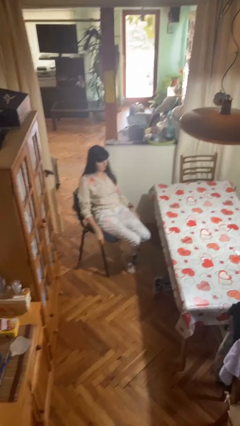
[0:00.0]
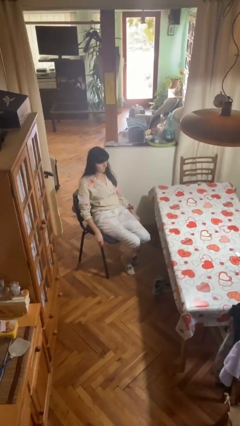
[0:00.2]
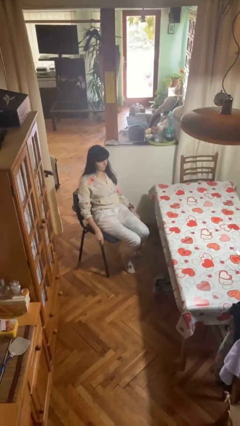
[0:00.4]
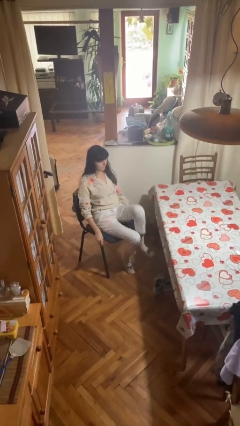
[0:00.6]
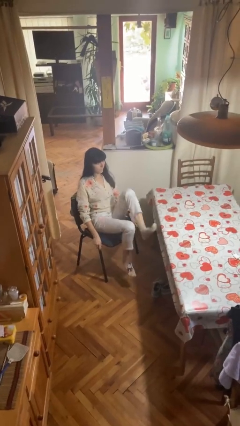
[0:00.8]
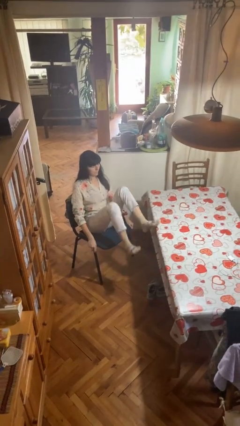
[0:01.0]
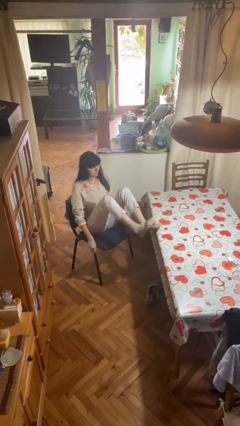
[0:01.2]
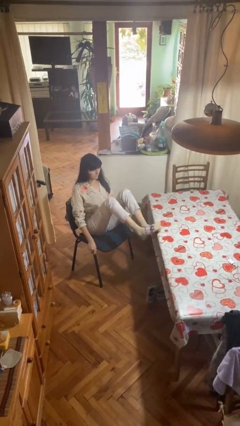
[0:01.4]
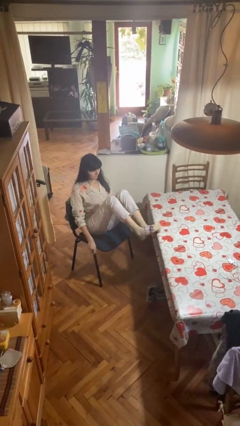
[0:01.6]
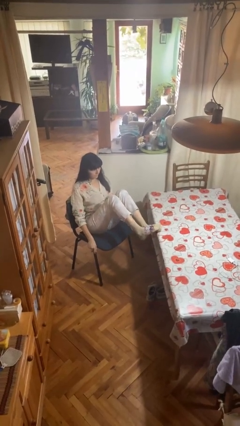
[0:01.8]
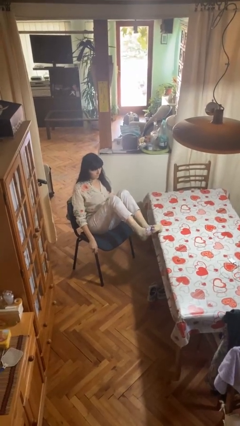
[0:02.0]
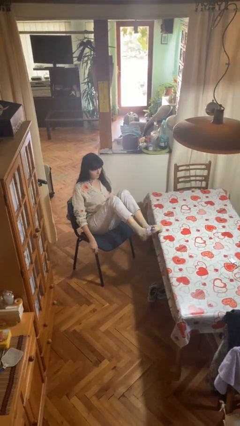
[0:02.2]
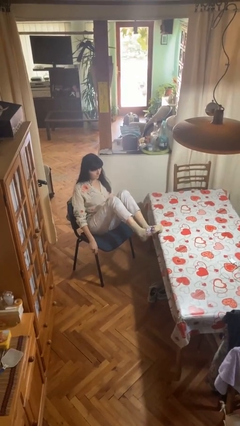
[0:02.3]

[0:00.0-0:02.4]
person puts feet up

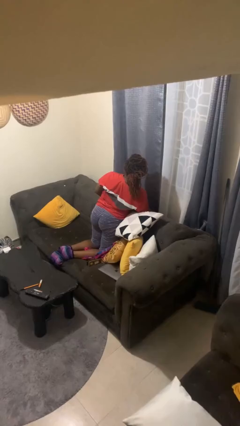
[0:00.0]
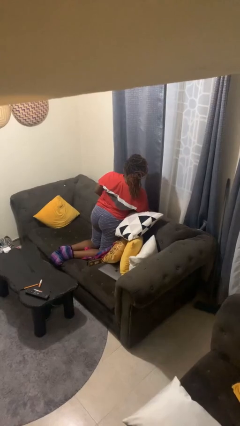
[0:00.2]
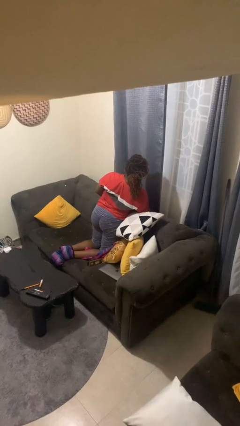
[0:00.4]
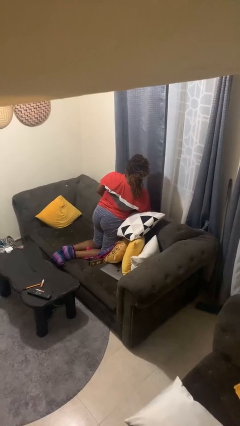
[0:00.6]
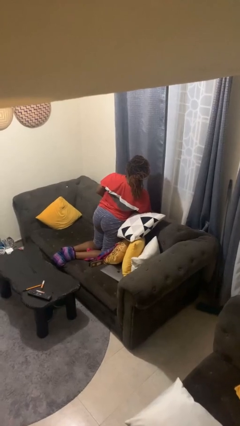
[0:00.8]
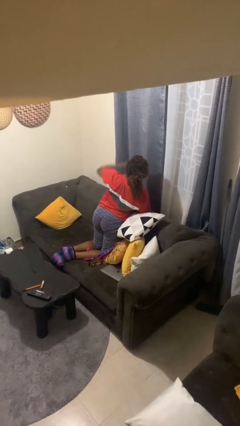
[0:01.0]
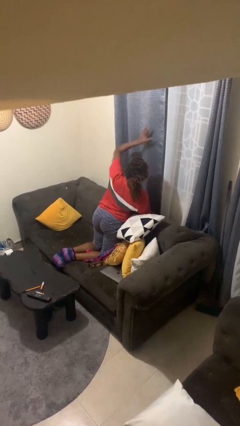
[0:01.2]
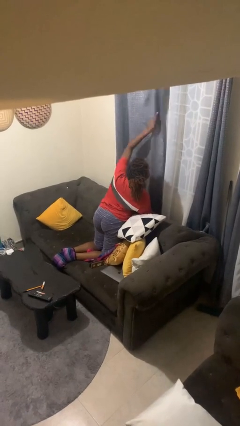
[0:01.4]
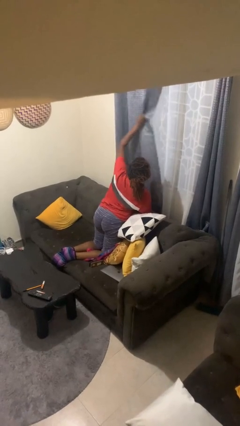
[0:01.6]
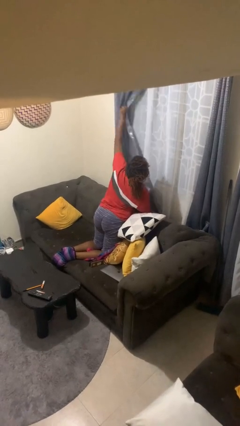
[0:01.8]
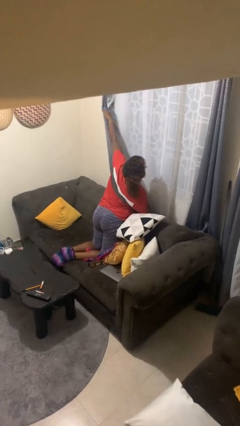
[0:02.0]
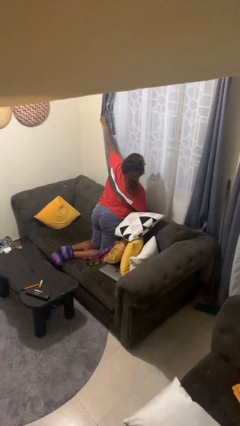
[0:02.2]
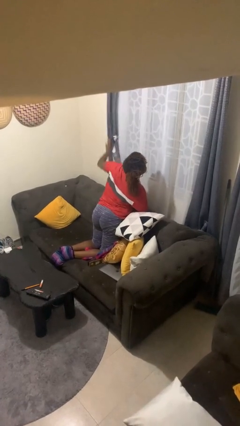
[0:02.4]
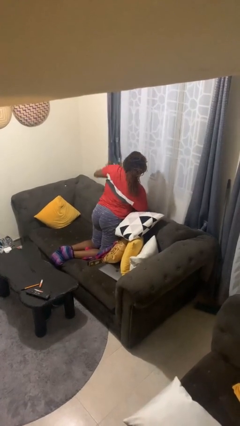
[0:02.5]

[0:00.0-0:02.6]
person opens curtains

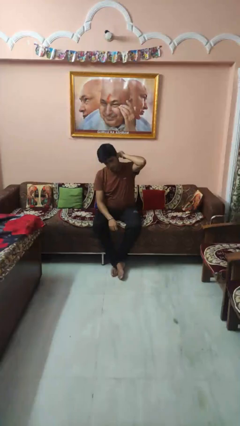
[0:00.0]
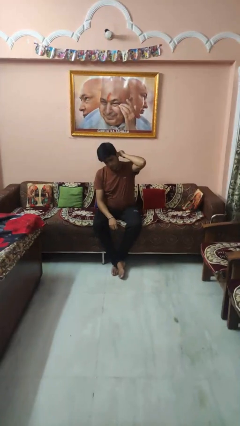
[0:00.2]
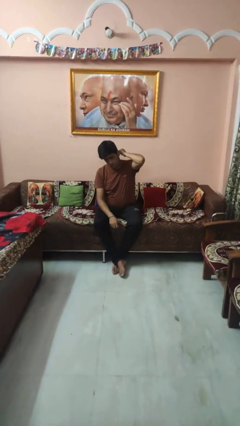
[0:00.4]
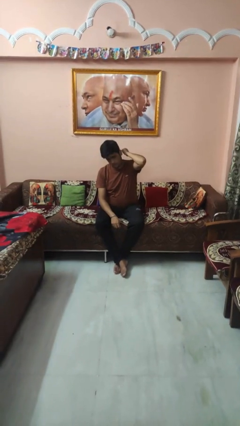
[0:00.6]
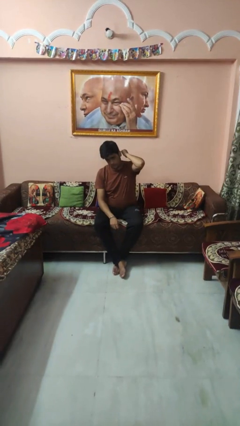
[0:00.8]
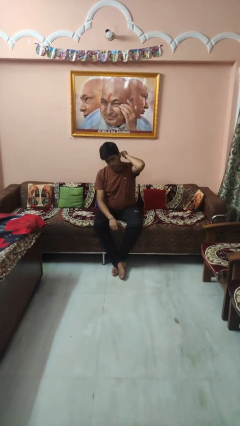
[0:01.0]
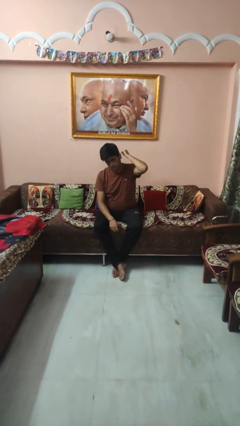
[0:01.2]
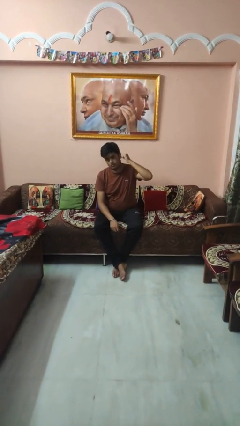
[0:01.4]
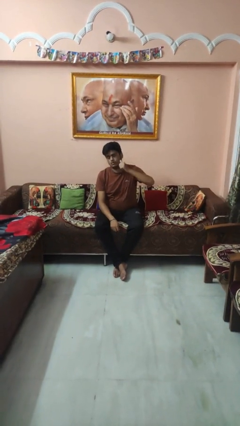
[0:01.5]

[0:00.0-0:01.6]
person gestures behind me

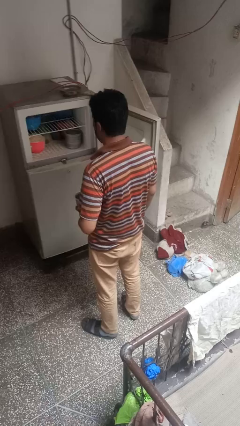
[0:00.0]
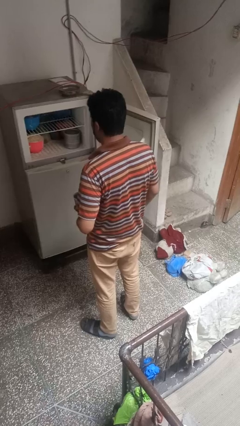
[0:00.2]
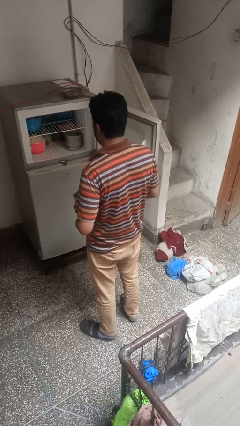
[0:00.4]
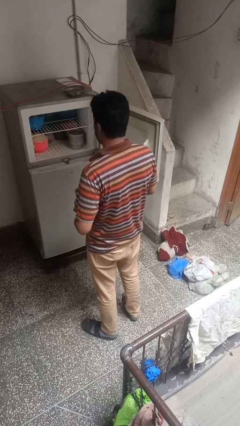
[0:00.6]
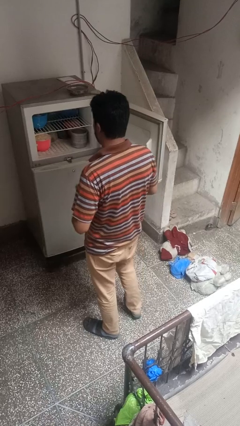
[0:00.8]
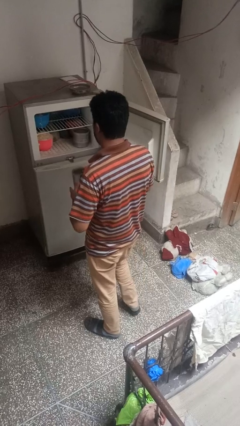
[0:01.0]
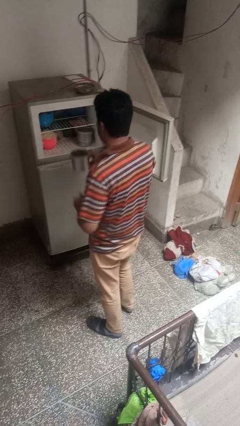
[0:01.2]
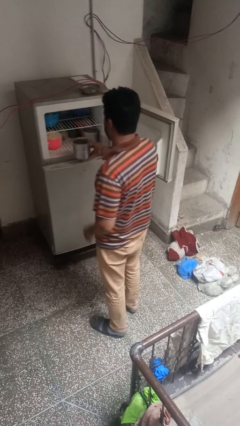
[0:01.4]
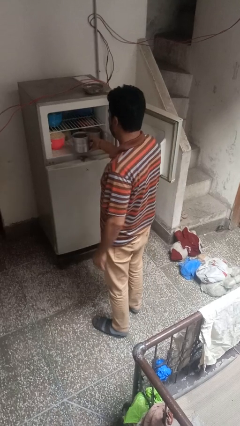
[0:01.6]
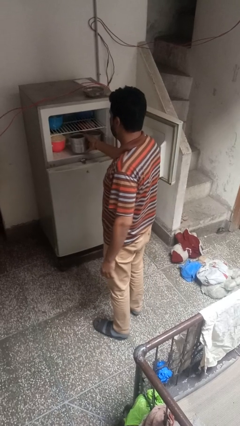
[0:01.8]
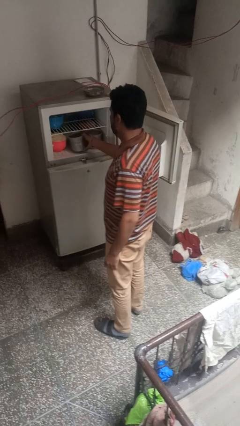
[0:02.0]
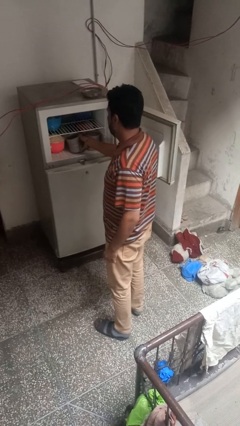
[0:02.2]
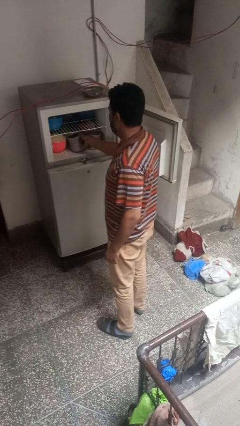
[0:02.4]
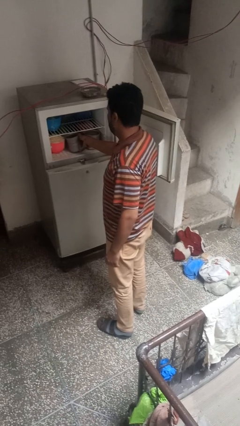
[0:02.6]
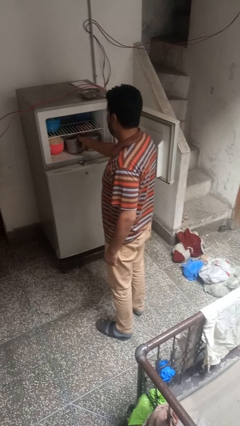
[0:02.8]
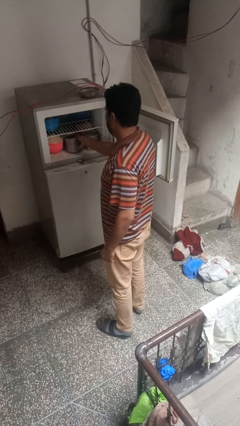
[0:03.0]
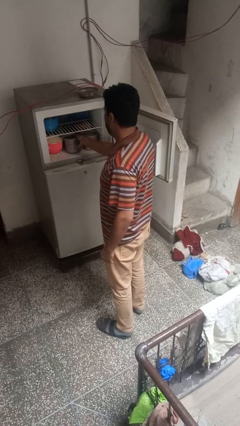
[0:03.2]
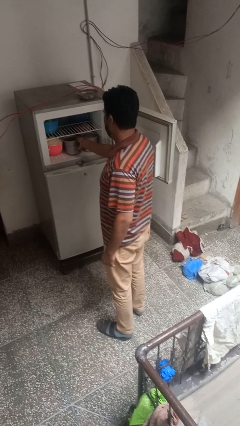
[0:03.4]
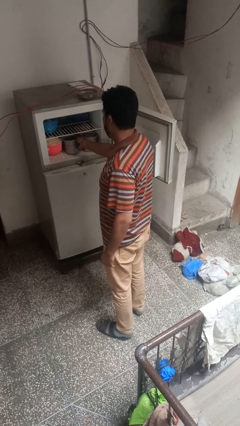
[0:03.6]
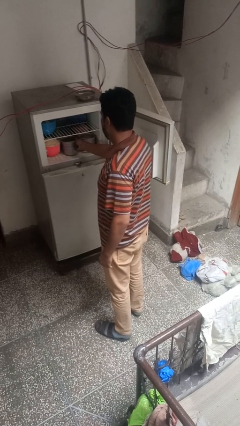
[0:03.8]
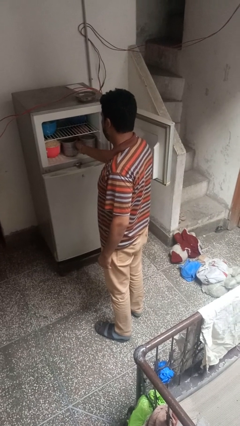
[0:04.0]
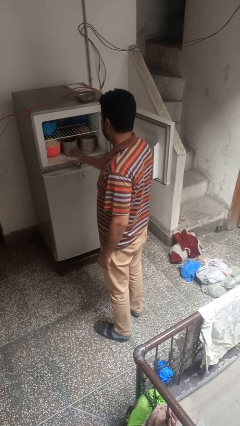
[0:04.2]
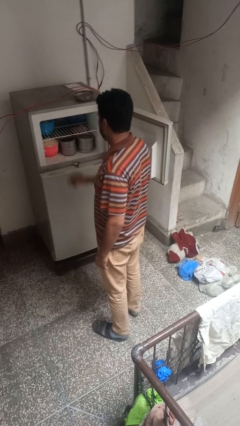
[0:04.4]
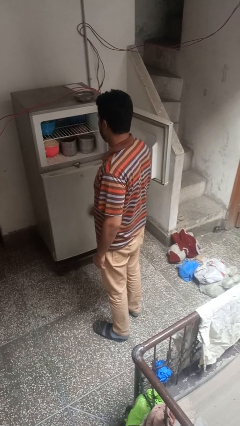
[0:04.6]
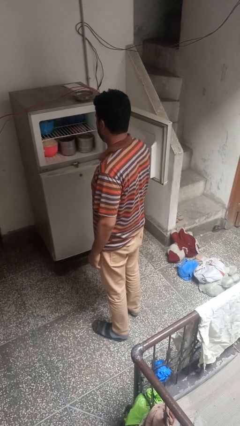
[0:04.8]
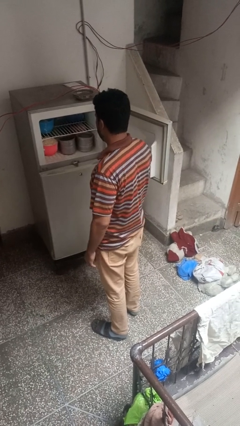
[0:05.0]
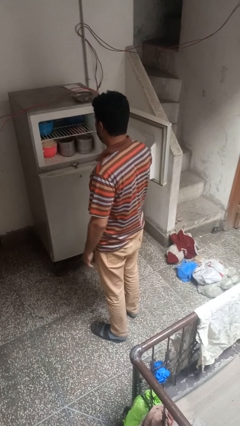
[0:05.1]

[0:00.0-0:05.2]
person puts object into refrigerator

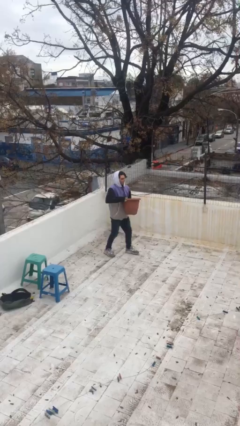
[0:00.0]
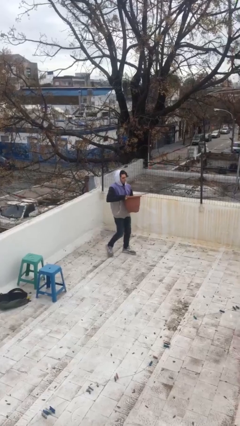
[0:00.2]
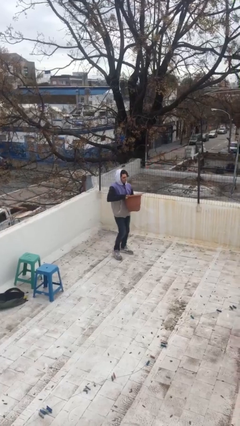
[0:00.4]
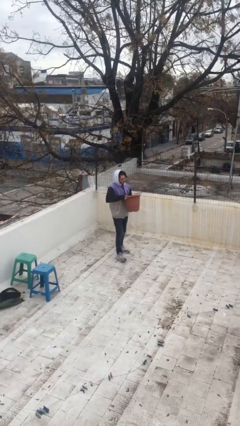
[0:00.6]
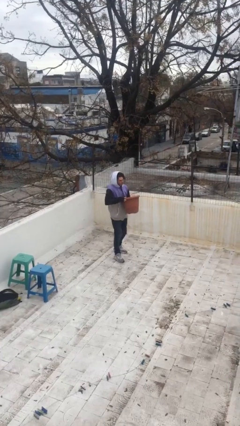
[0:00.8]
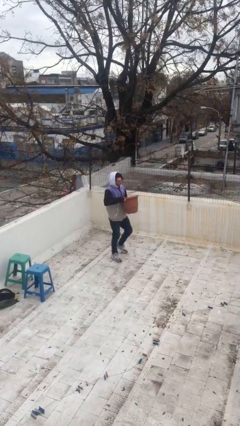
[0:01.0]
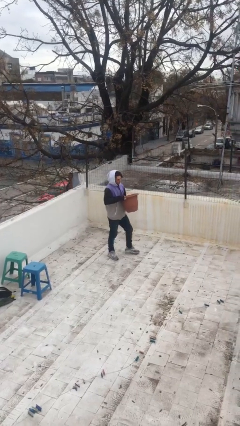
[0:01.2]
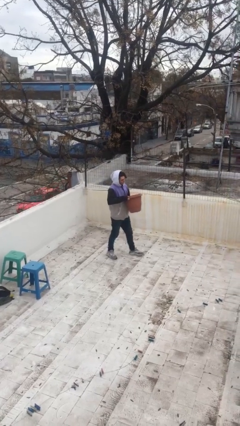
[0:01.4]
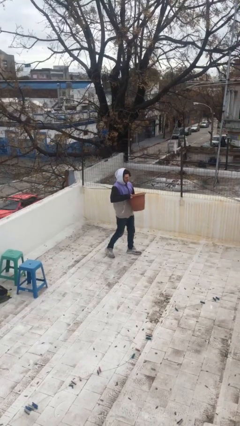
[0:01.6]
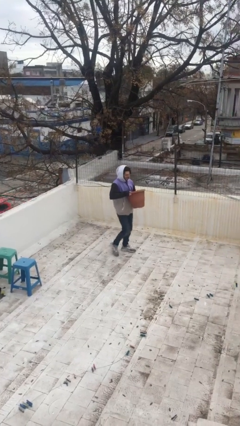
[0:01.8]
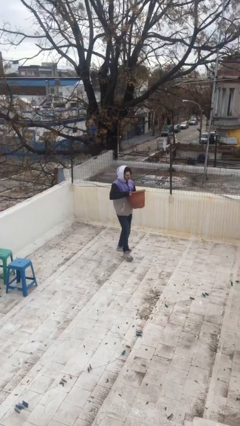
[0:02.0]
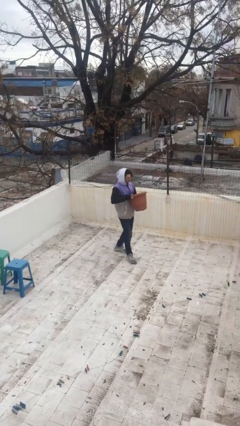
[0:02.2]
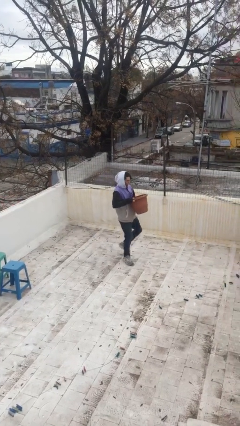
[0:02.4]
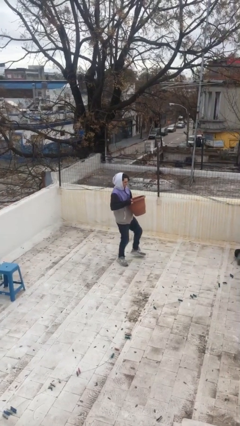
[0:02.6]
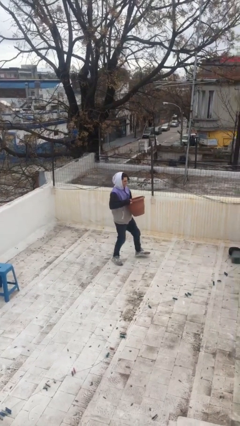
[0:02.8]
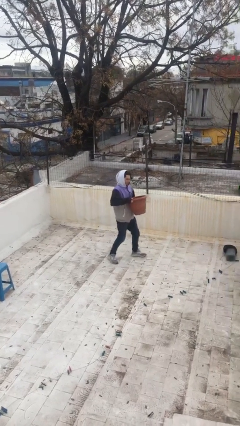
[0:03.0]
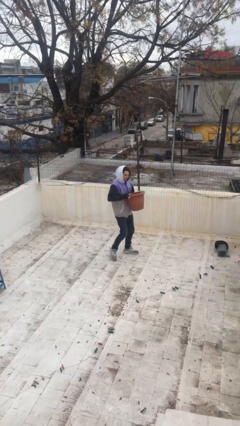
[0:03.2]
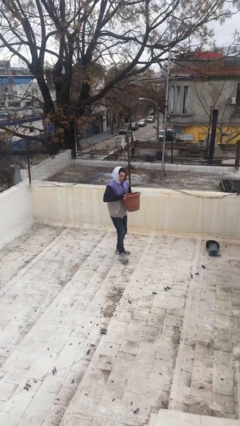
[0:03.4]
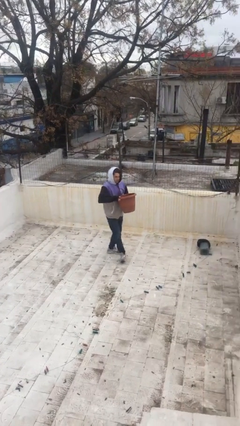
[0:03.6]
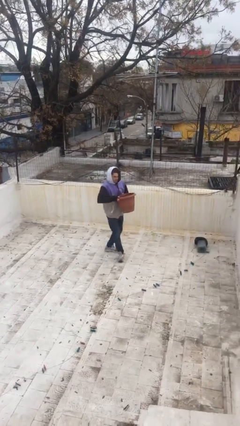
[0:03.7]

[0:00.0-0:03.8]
person carries heavy object

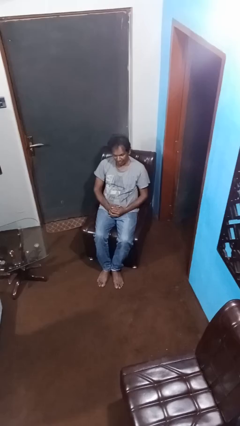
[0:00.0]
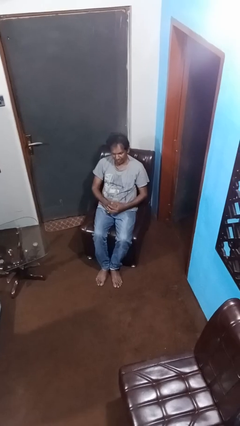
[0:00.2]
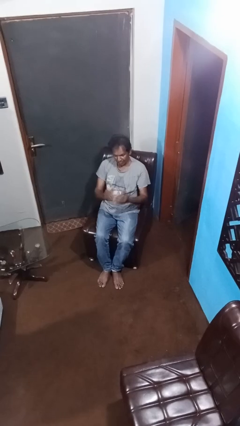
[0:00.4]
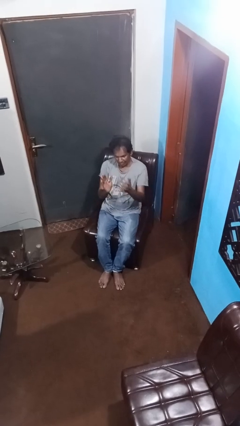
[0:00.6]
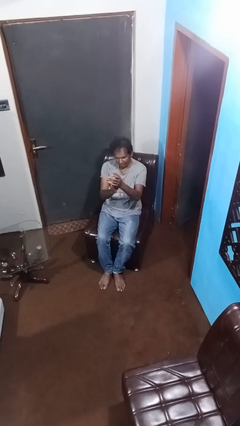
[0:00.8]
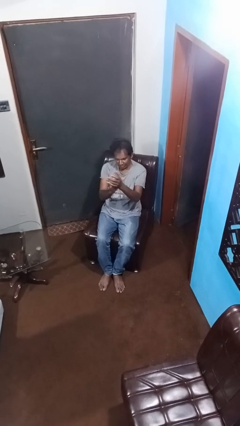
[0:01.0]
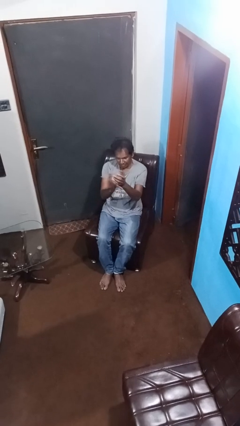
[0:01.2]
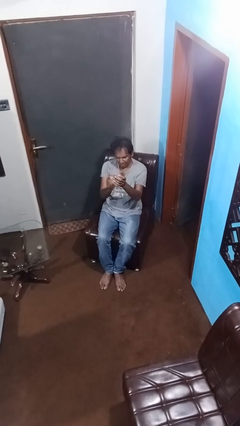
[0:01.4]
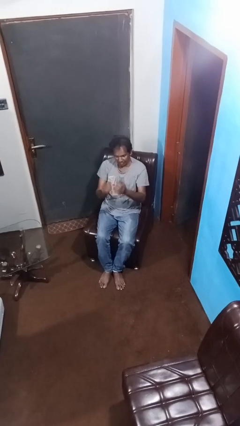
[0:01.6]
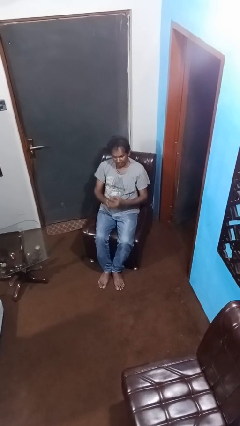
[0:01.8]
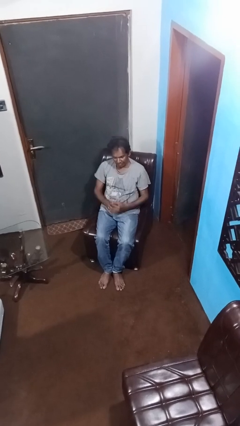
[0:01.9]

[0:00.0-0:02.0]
person claps hands
